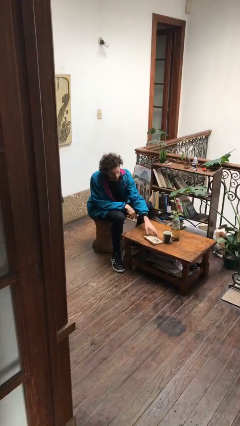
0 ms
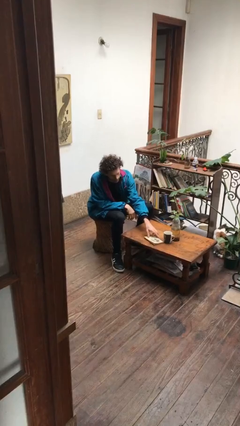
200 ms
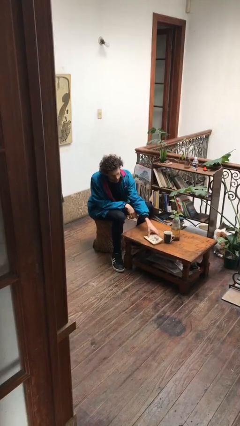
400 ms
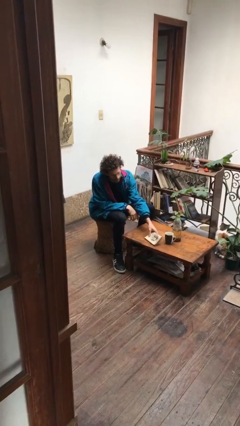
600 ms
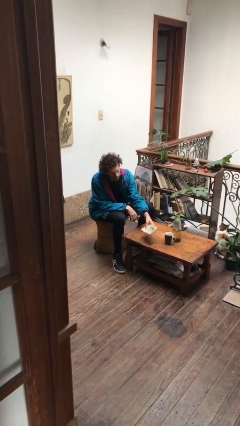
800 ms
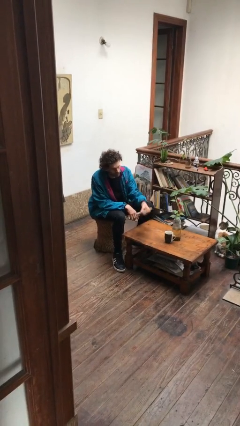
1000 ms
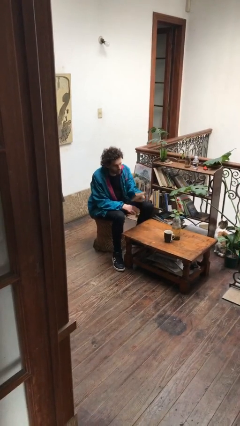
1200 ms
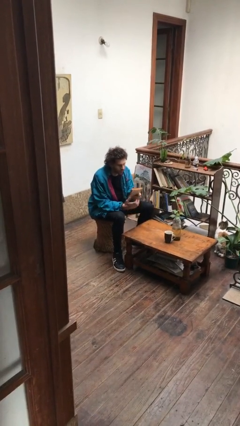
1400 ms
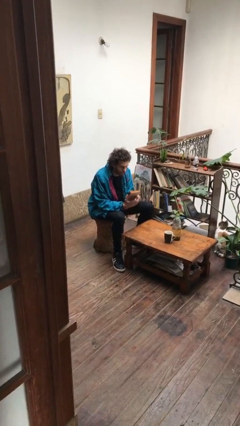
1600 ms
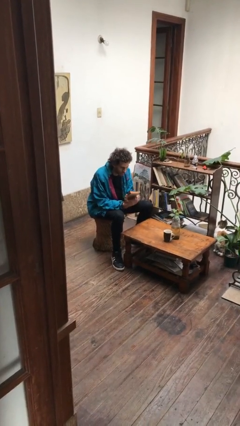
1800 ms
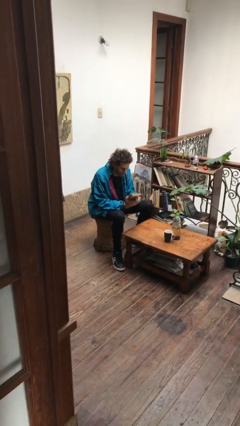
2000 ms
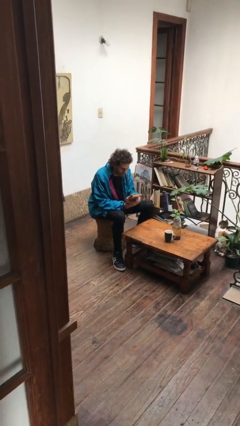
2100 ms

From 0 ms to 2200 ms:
person picks up object from table

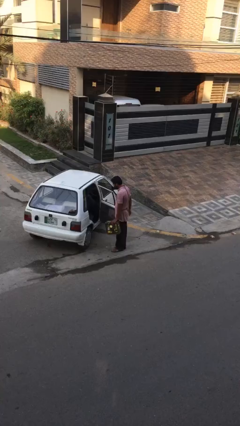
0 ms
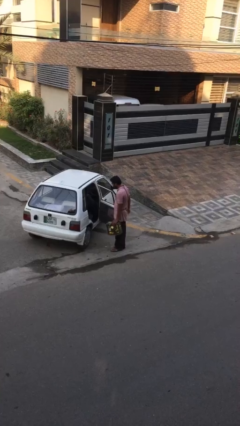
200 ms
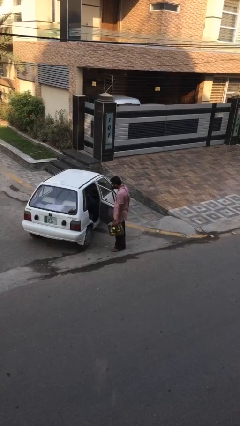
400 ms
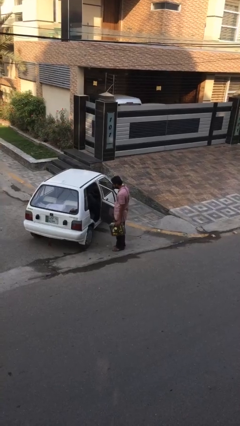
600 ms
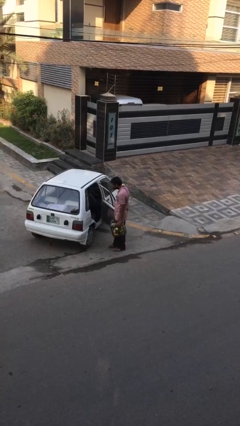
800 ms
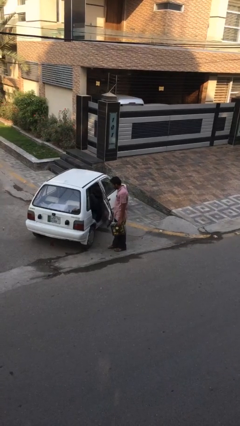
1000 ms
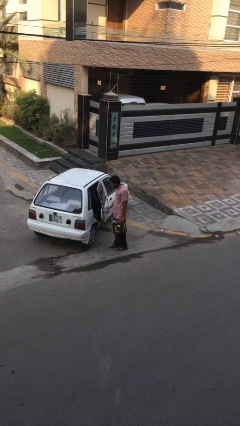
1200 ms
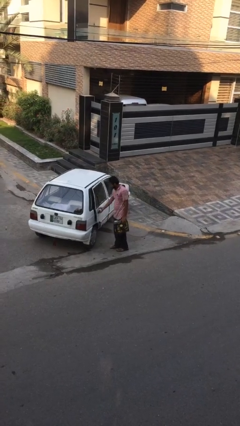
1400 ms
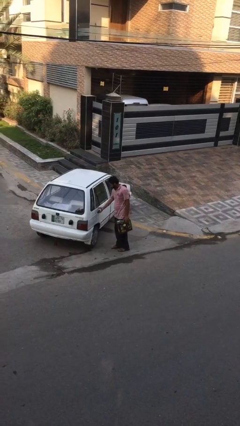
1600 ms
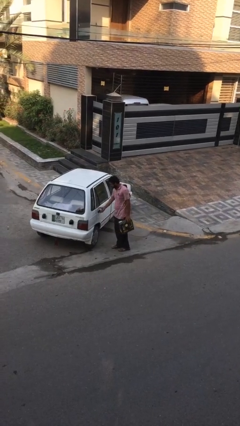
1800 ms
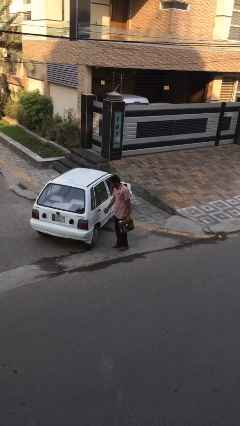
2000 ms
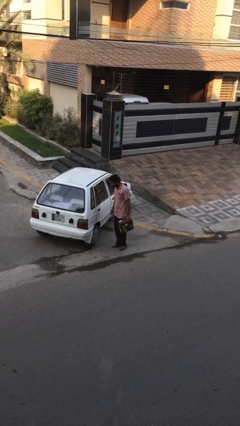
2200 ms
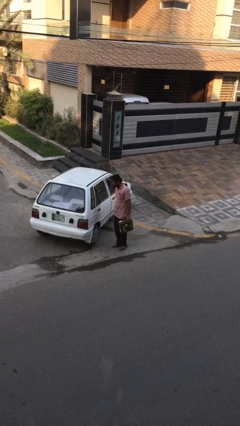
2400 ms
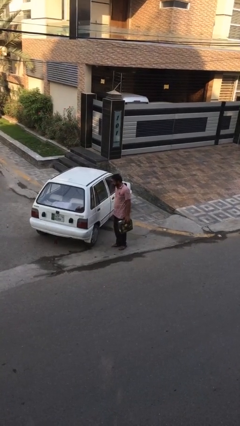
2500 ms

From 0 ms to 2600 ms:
person closes car door

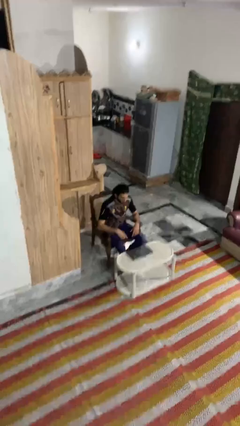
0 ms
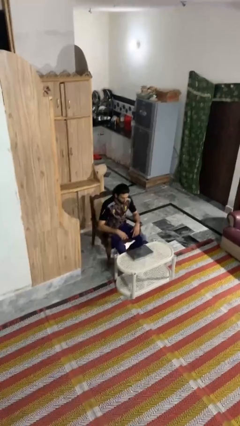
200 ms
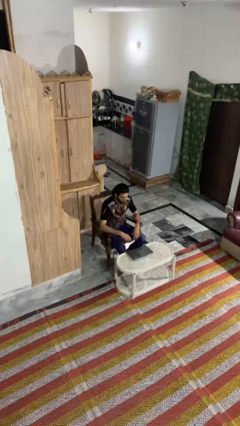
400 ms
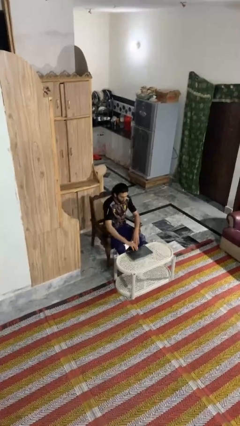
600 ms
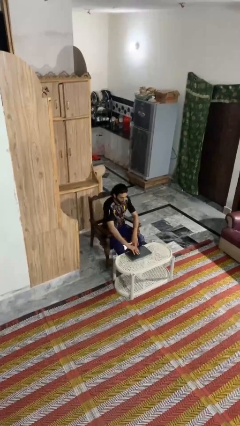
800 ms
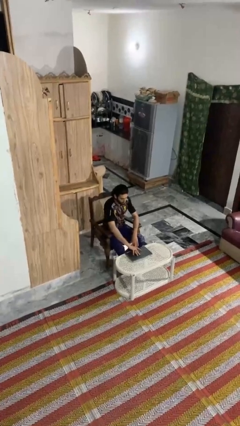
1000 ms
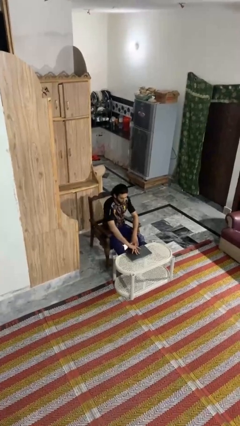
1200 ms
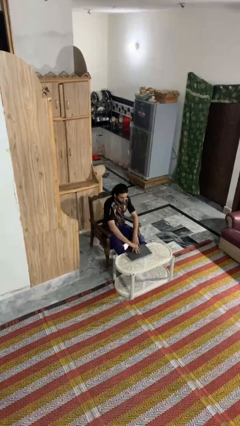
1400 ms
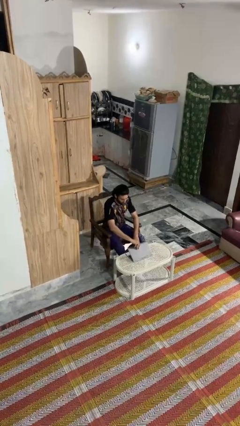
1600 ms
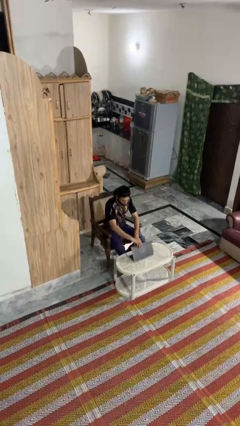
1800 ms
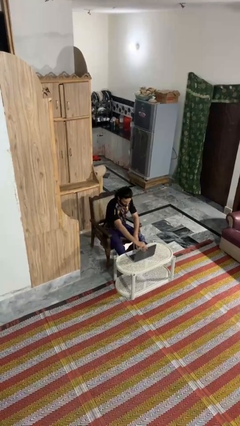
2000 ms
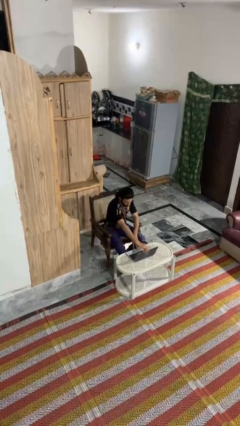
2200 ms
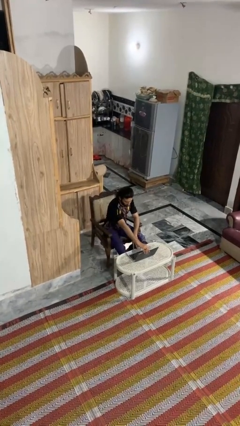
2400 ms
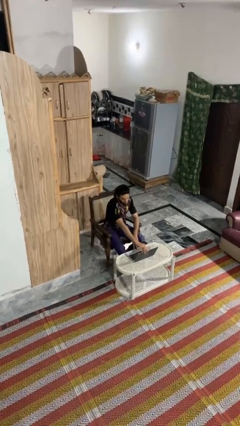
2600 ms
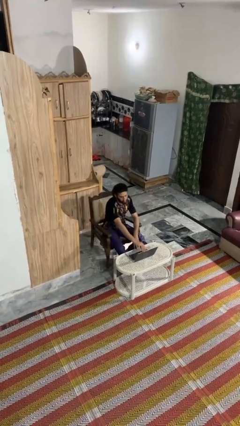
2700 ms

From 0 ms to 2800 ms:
person opens laptop

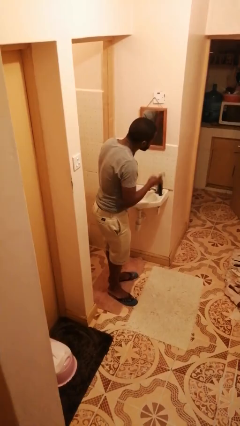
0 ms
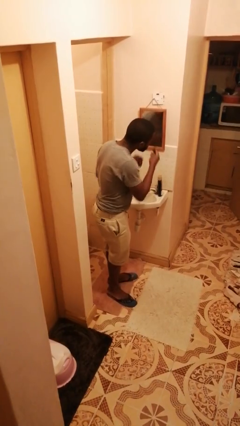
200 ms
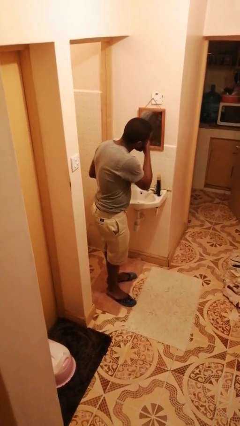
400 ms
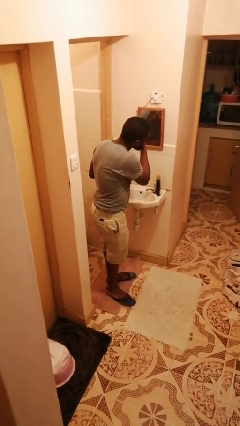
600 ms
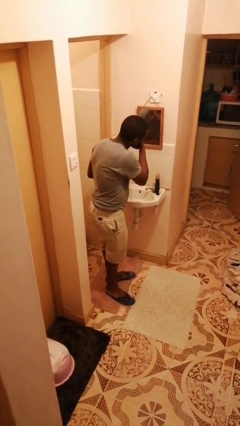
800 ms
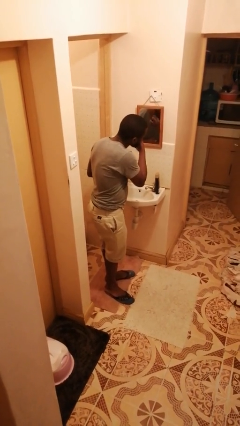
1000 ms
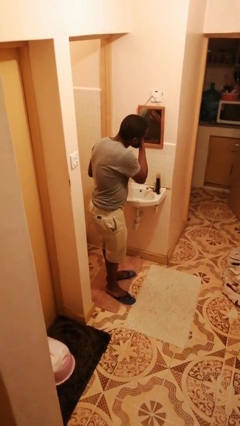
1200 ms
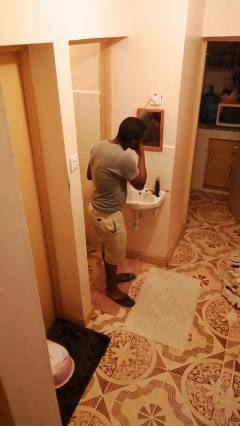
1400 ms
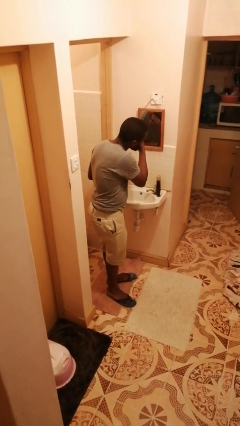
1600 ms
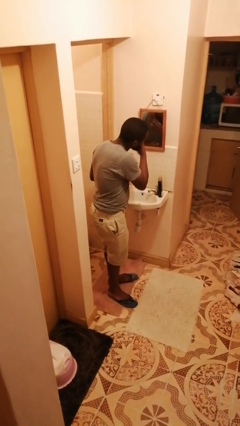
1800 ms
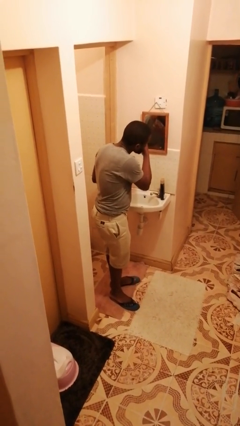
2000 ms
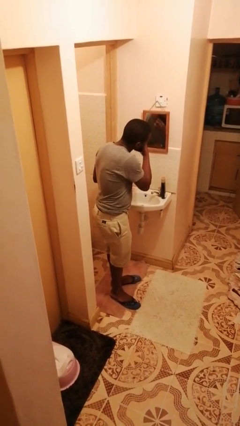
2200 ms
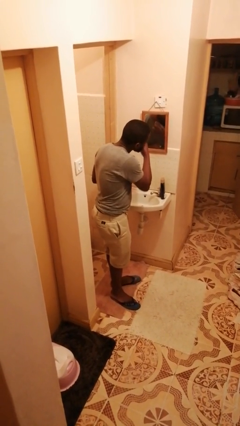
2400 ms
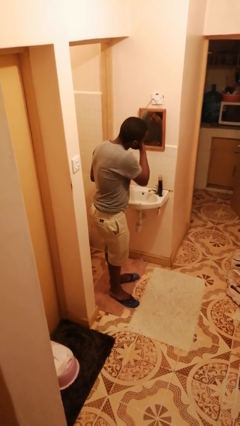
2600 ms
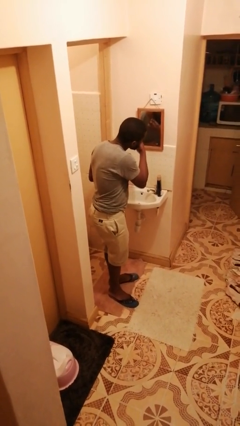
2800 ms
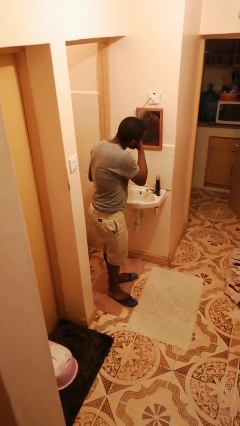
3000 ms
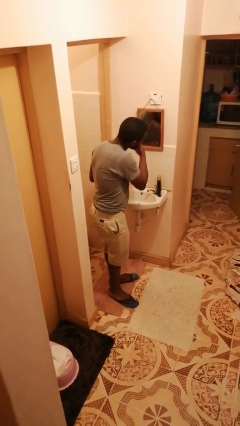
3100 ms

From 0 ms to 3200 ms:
person shaves face

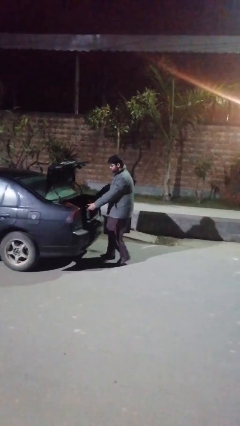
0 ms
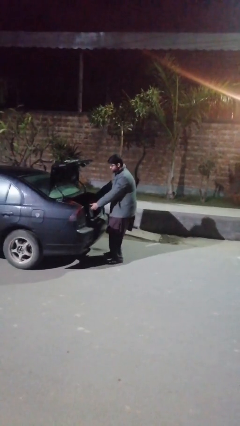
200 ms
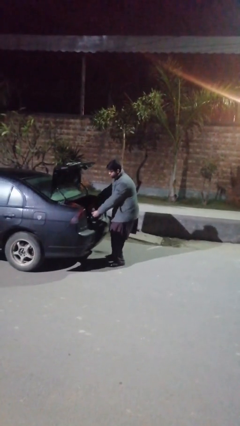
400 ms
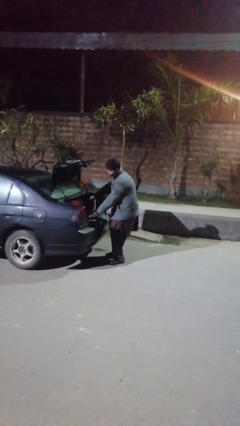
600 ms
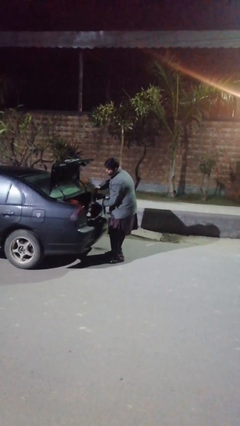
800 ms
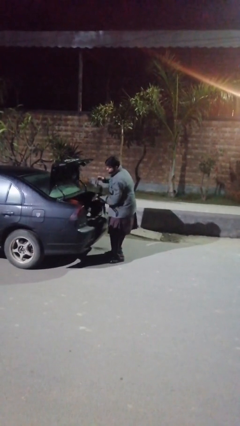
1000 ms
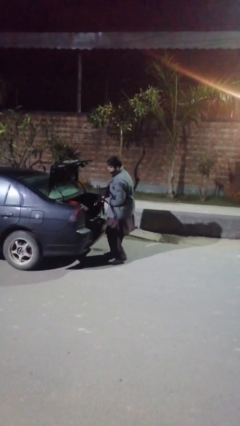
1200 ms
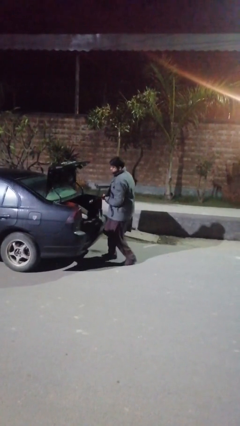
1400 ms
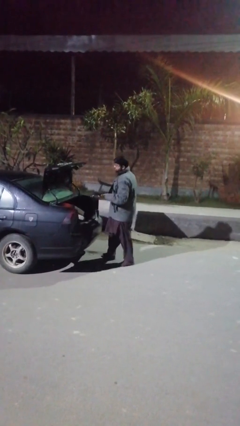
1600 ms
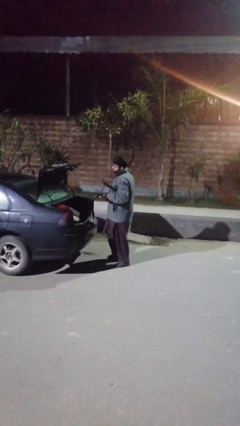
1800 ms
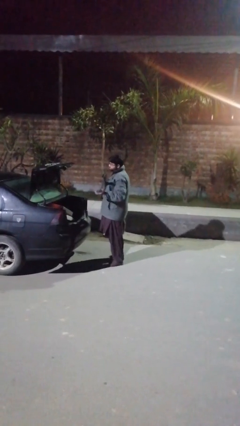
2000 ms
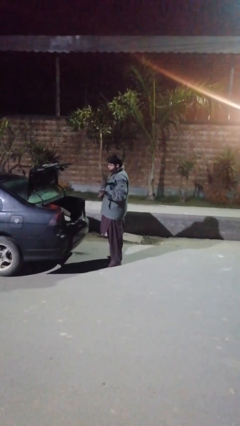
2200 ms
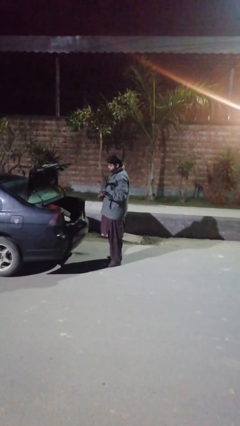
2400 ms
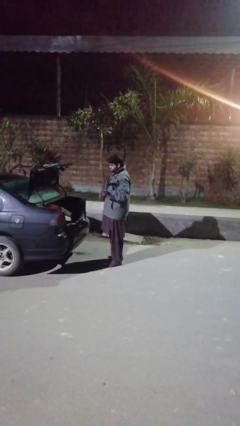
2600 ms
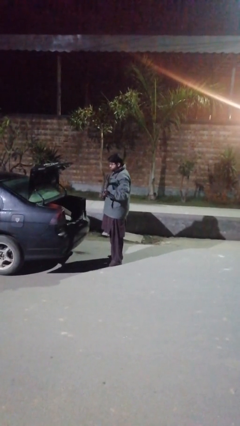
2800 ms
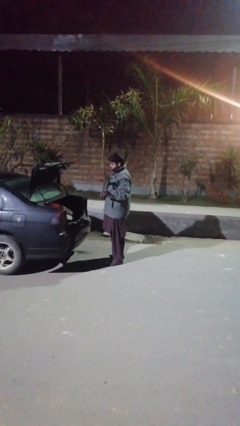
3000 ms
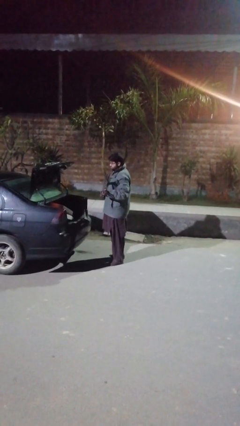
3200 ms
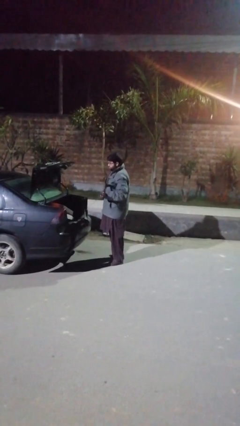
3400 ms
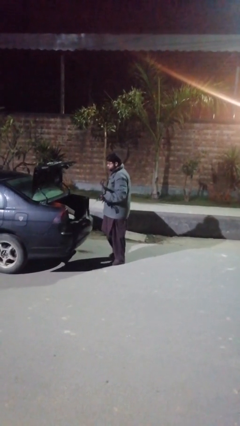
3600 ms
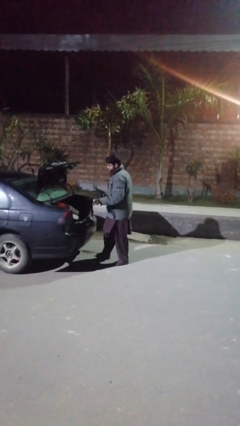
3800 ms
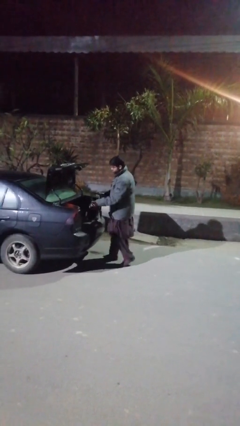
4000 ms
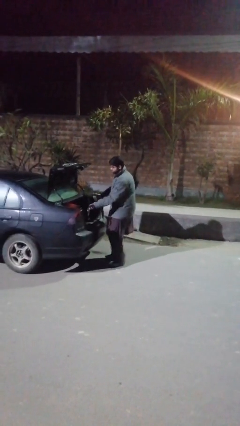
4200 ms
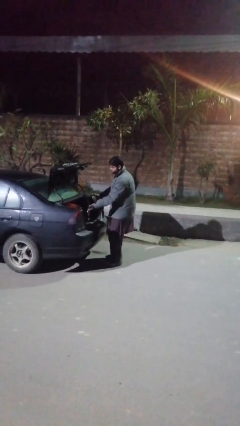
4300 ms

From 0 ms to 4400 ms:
person unloads car

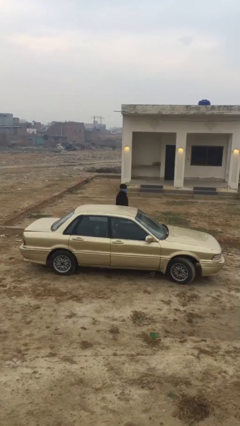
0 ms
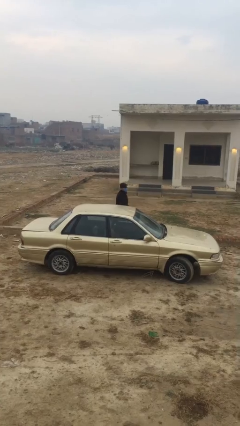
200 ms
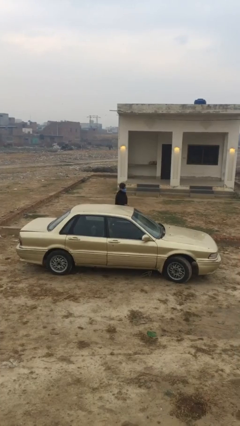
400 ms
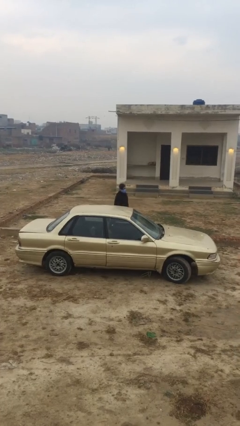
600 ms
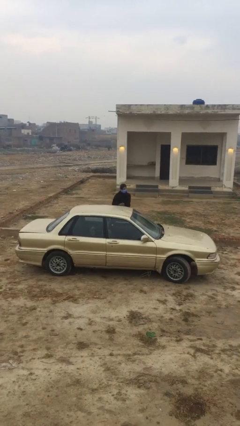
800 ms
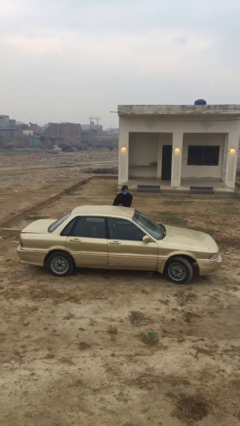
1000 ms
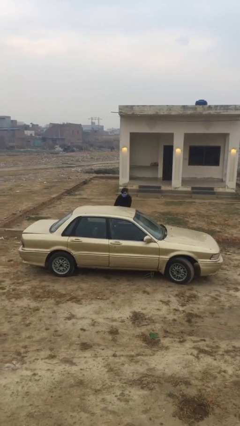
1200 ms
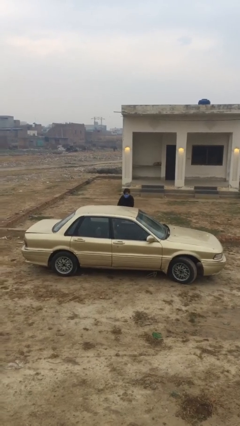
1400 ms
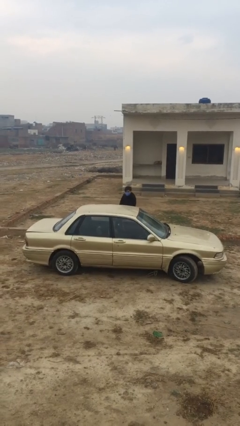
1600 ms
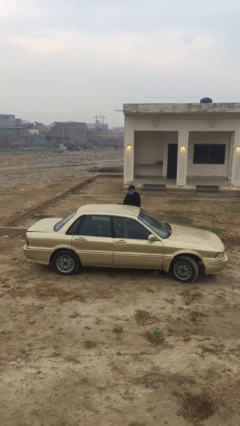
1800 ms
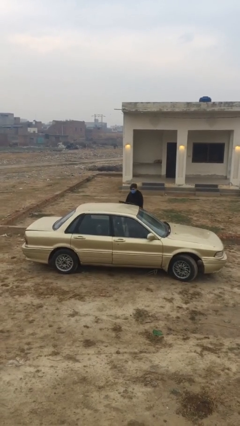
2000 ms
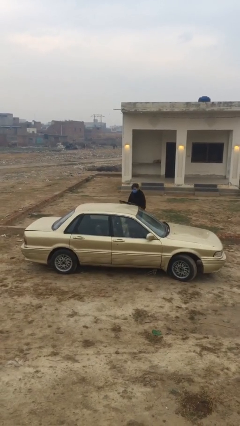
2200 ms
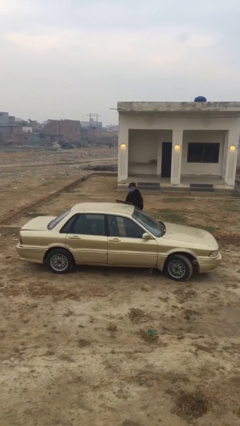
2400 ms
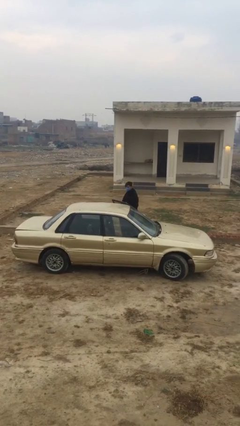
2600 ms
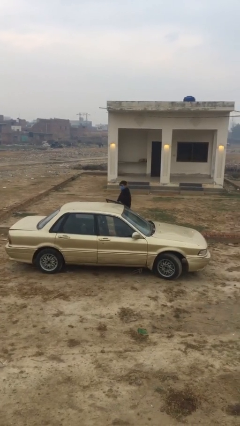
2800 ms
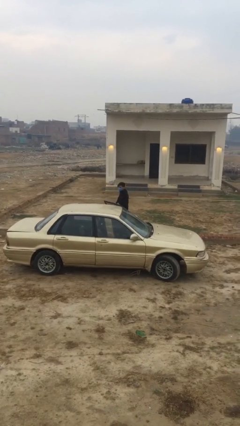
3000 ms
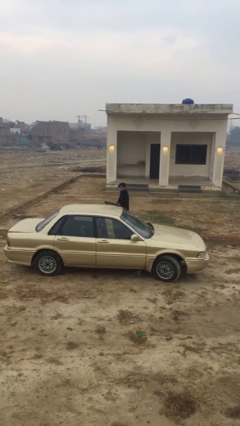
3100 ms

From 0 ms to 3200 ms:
person opens car door
